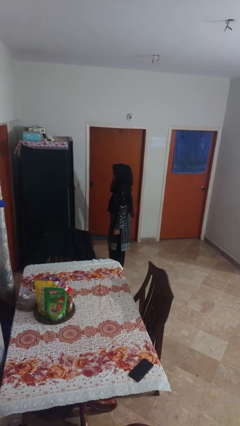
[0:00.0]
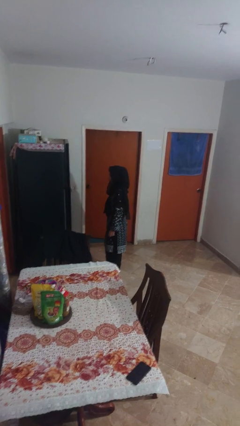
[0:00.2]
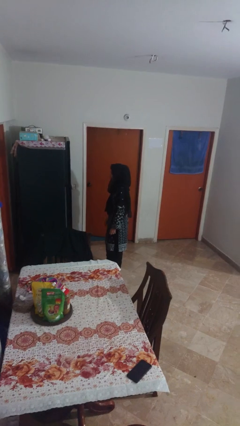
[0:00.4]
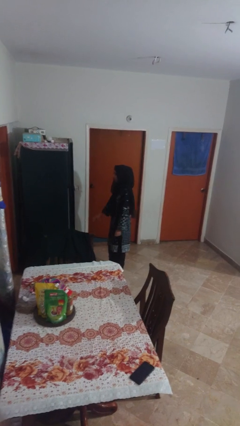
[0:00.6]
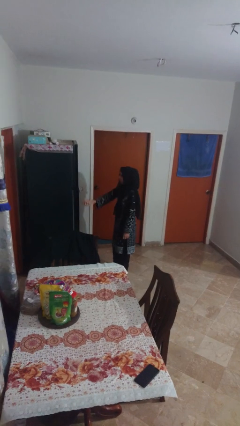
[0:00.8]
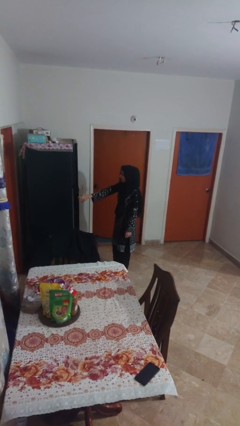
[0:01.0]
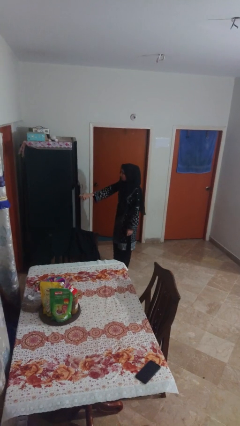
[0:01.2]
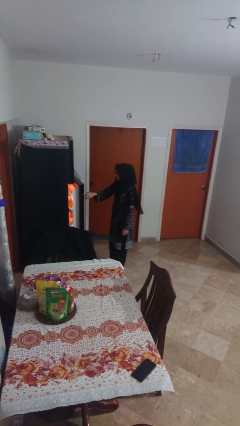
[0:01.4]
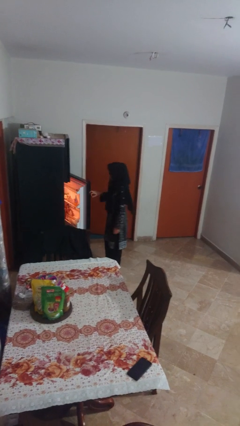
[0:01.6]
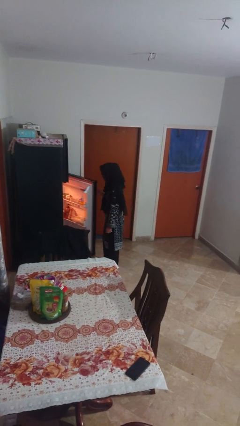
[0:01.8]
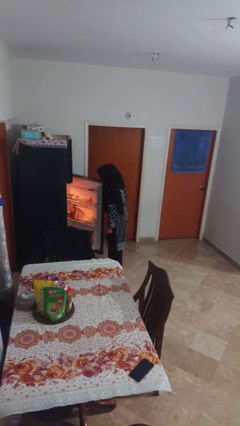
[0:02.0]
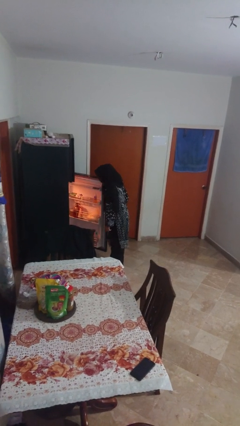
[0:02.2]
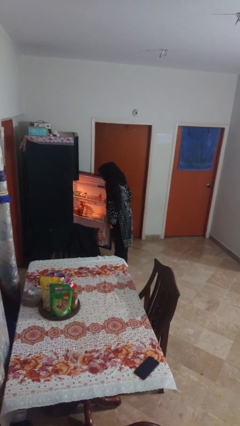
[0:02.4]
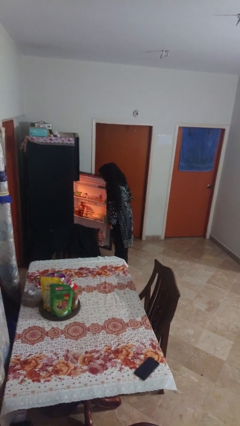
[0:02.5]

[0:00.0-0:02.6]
person opens refrigerator

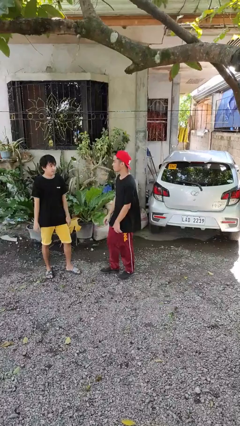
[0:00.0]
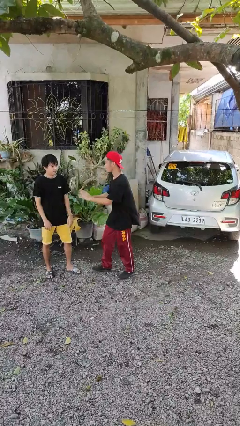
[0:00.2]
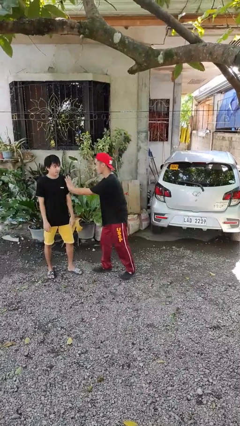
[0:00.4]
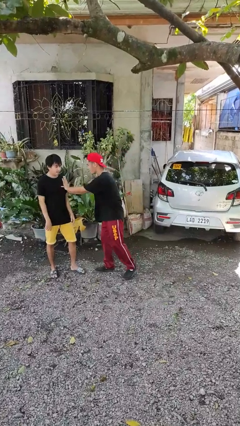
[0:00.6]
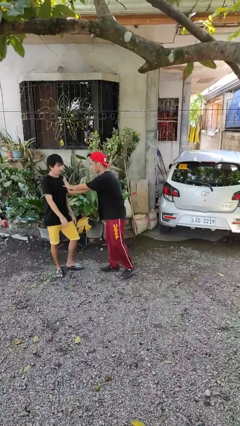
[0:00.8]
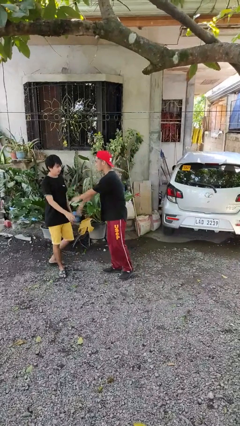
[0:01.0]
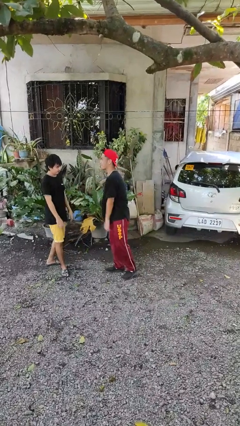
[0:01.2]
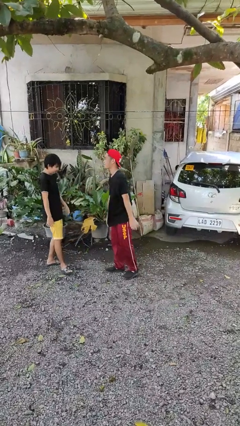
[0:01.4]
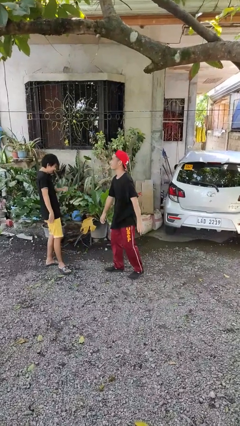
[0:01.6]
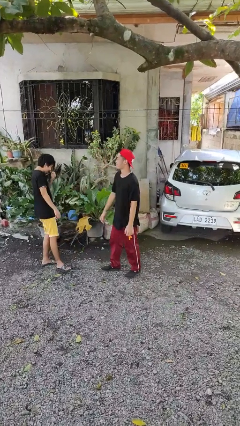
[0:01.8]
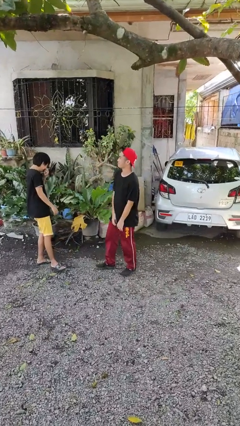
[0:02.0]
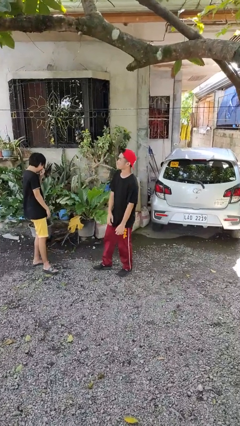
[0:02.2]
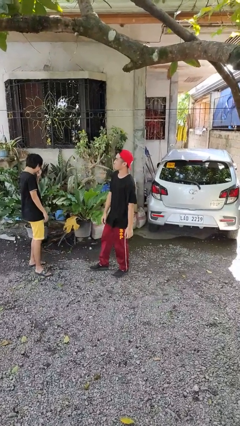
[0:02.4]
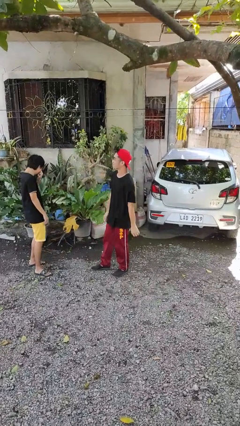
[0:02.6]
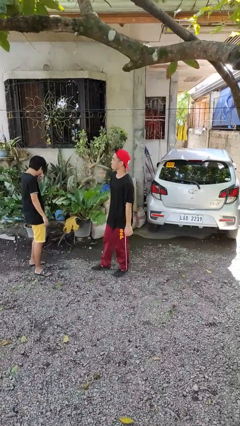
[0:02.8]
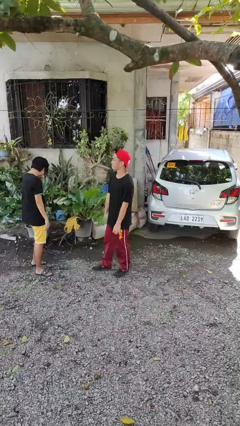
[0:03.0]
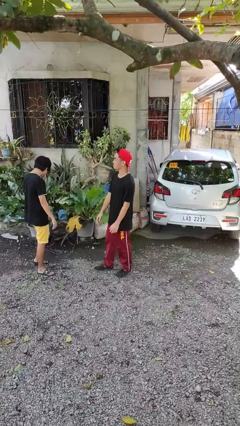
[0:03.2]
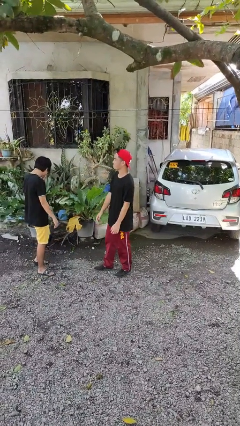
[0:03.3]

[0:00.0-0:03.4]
person shoves person

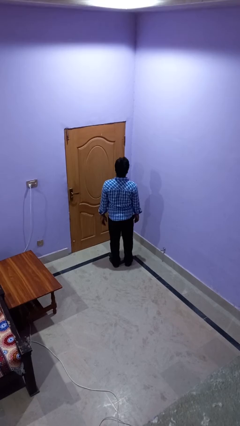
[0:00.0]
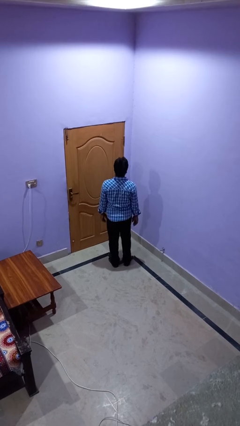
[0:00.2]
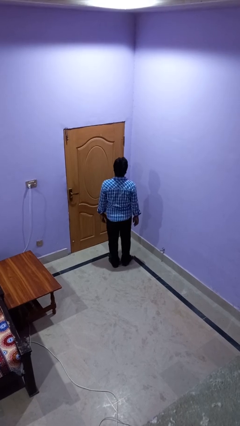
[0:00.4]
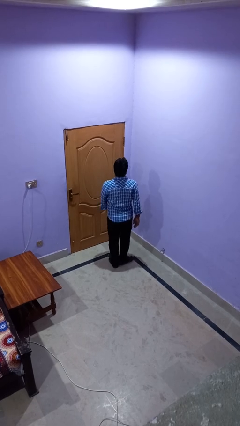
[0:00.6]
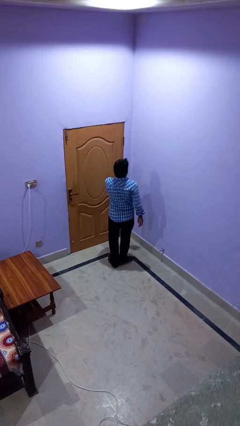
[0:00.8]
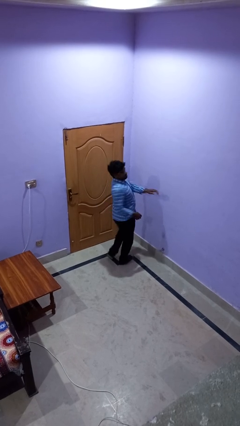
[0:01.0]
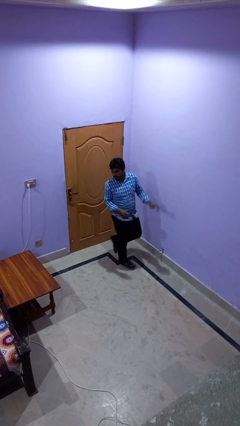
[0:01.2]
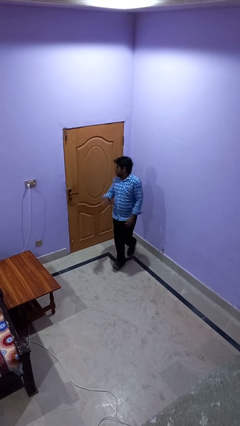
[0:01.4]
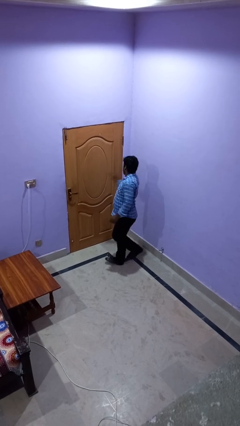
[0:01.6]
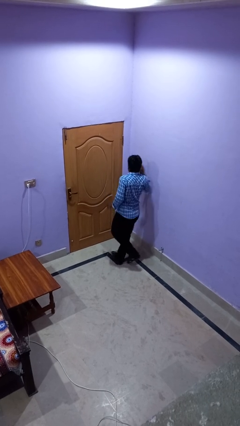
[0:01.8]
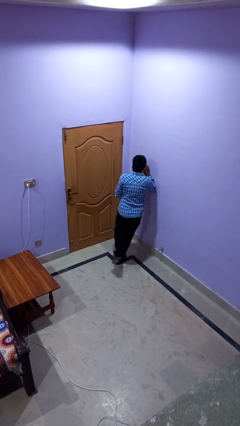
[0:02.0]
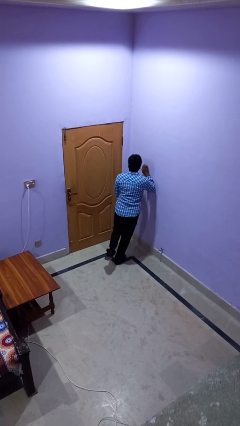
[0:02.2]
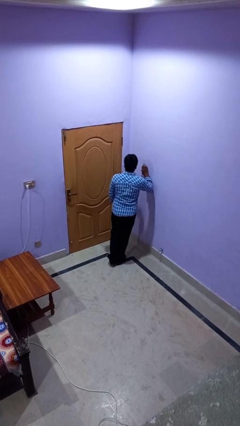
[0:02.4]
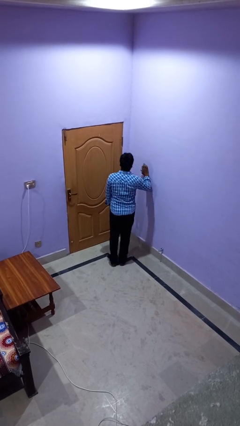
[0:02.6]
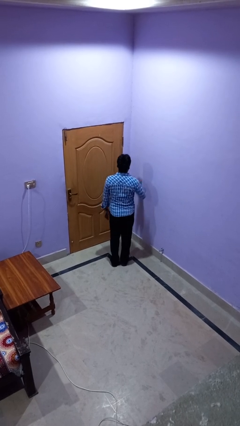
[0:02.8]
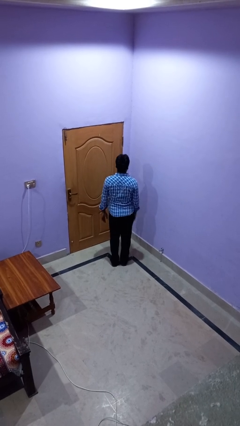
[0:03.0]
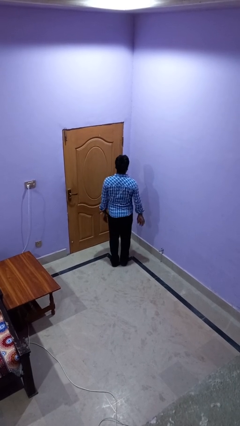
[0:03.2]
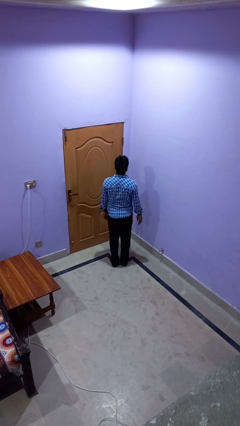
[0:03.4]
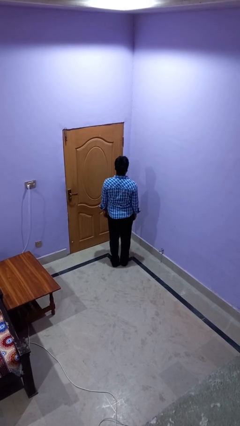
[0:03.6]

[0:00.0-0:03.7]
person twirls

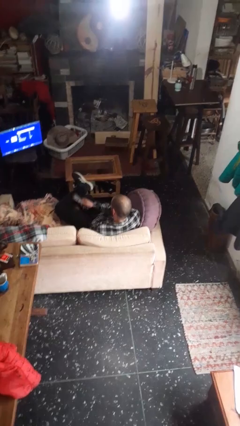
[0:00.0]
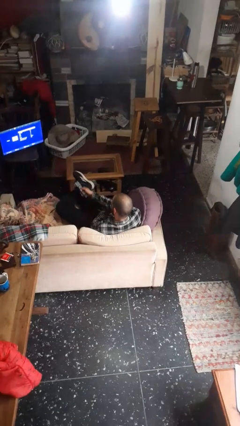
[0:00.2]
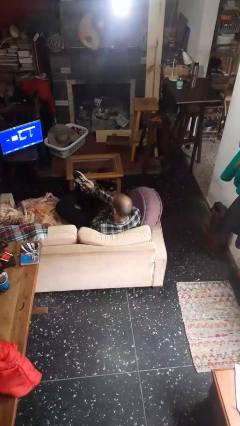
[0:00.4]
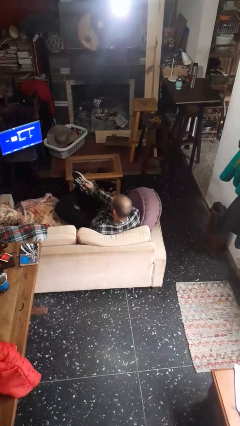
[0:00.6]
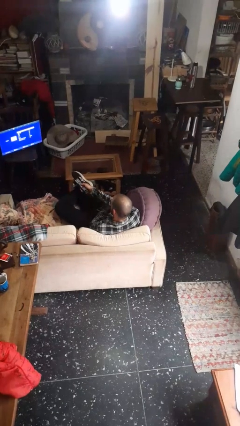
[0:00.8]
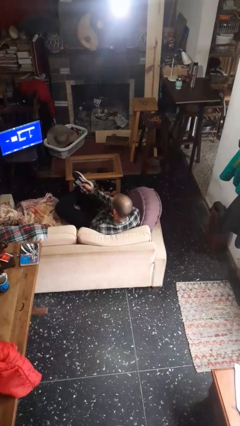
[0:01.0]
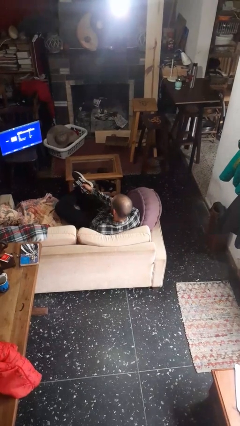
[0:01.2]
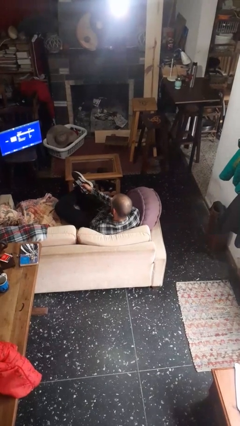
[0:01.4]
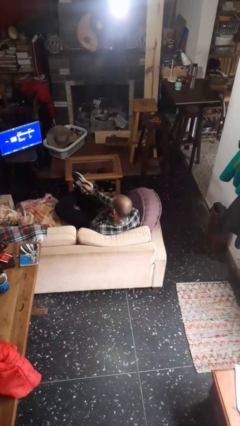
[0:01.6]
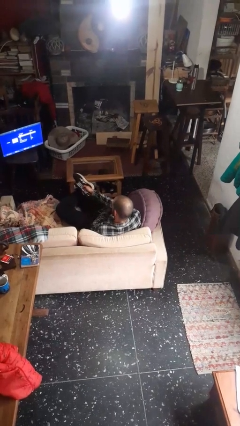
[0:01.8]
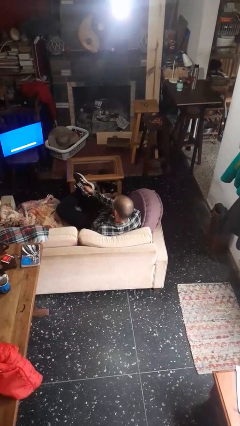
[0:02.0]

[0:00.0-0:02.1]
person uses television remote

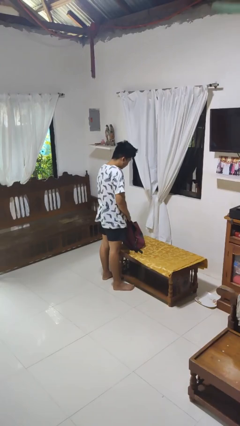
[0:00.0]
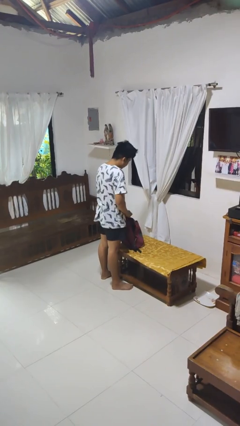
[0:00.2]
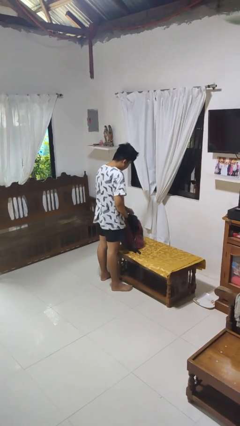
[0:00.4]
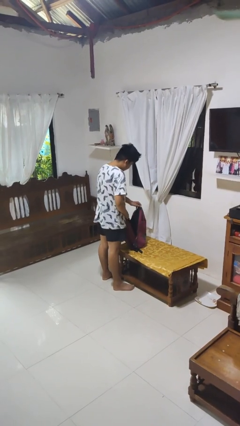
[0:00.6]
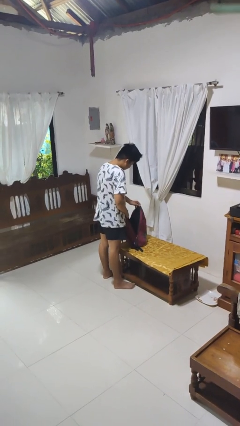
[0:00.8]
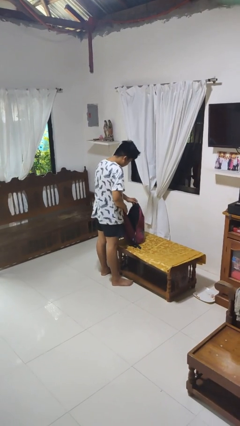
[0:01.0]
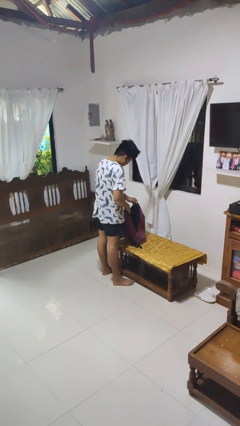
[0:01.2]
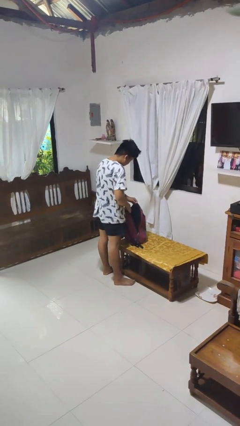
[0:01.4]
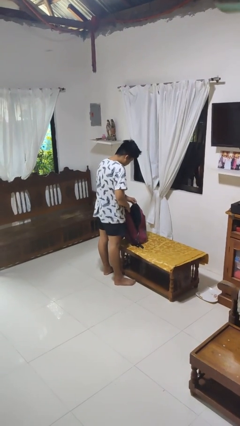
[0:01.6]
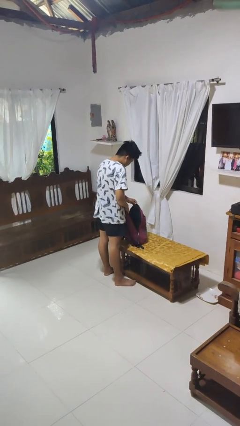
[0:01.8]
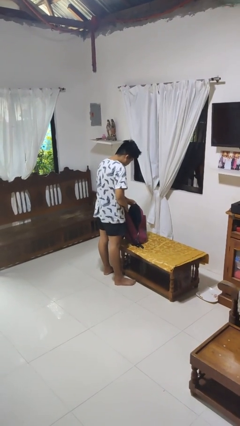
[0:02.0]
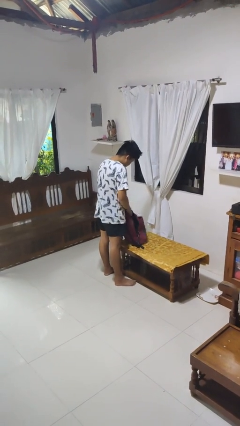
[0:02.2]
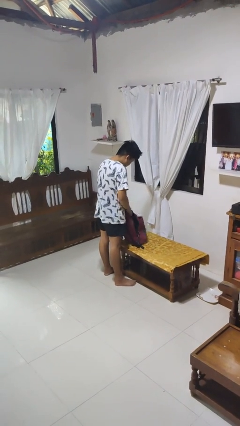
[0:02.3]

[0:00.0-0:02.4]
person searches in bag

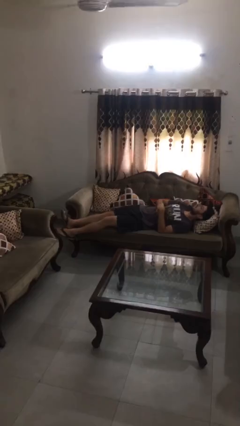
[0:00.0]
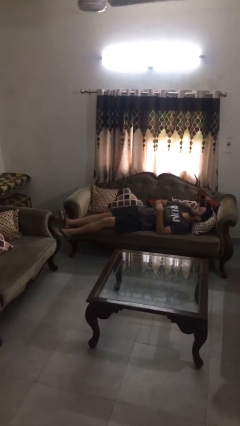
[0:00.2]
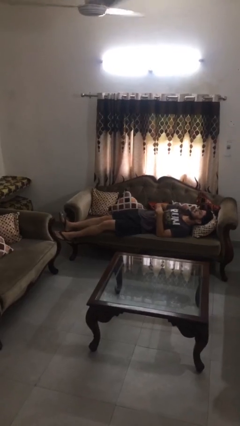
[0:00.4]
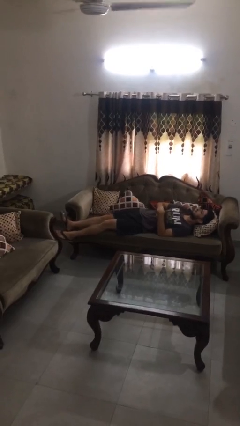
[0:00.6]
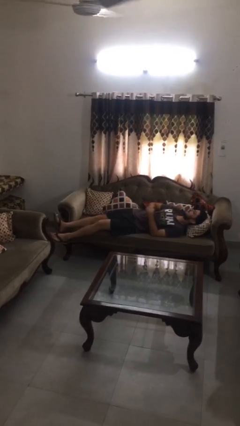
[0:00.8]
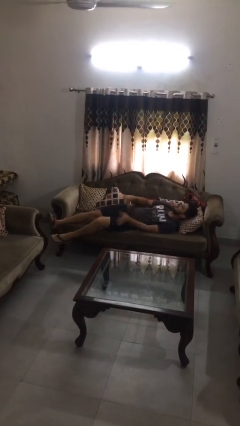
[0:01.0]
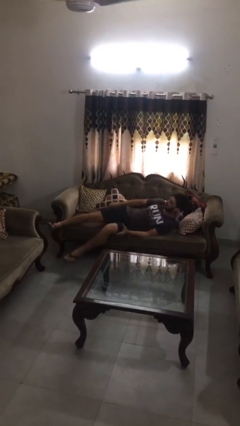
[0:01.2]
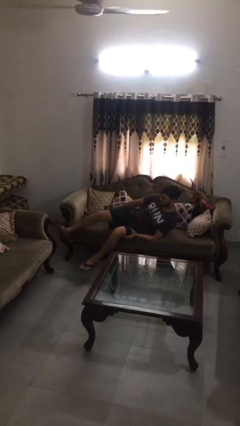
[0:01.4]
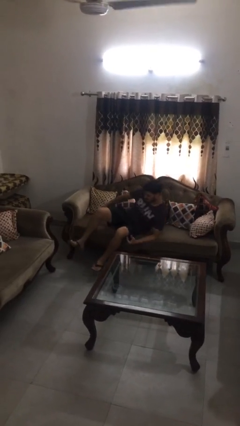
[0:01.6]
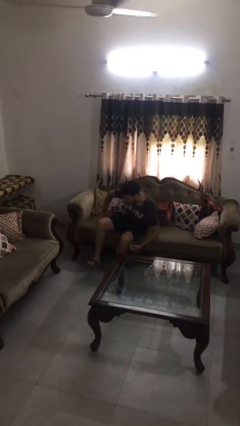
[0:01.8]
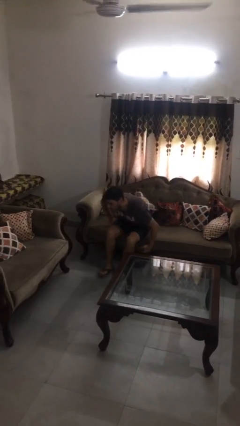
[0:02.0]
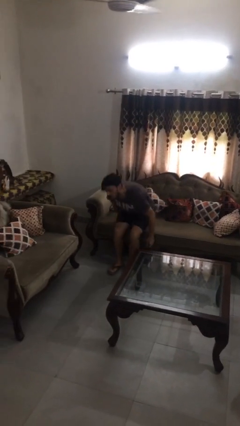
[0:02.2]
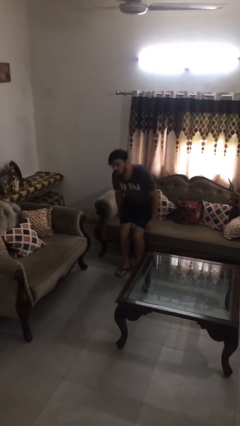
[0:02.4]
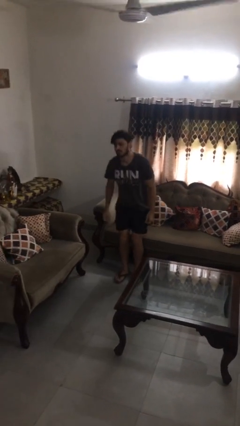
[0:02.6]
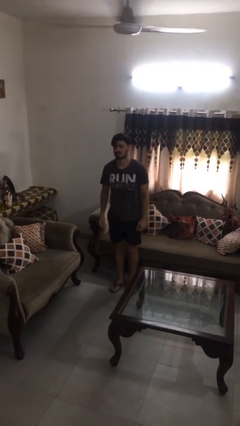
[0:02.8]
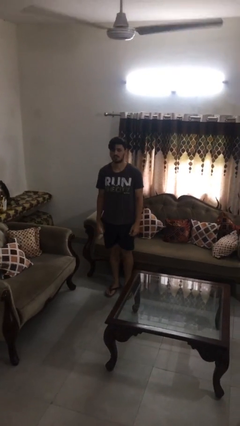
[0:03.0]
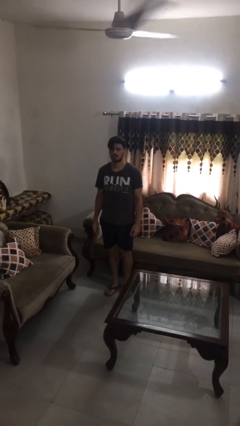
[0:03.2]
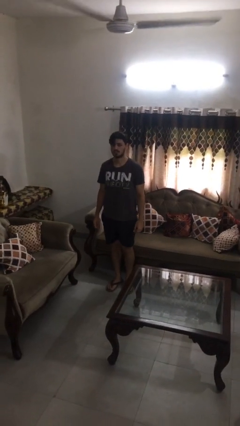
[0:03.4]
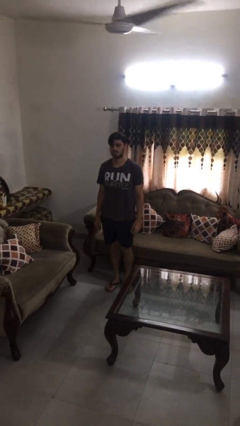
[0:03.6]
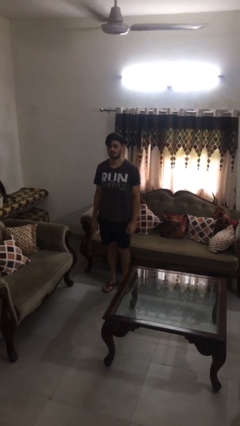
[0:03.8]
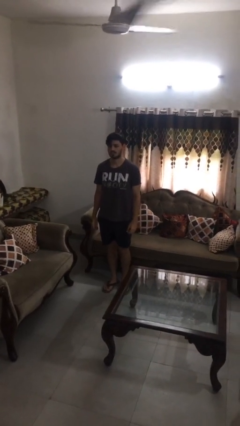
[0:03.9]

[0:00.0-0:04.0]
person stands up
